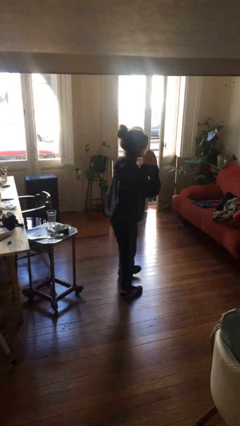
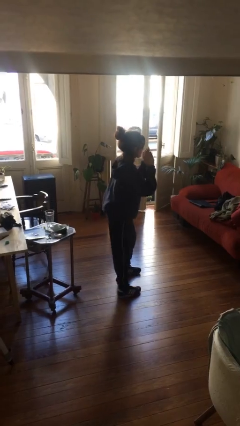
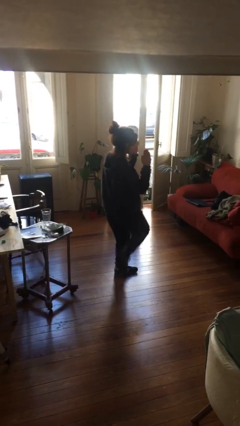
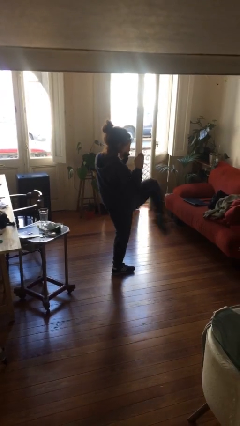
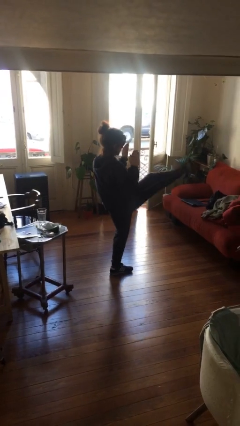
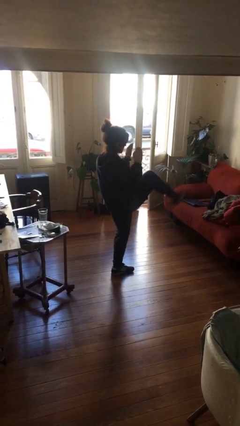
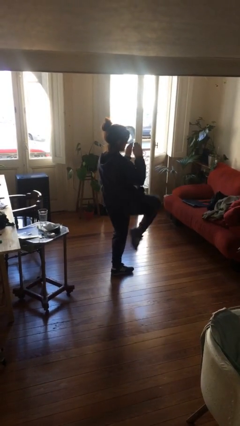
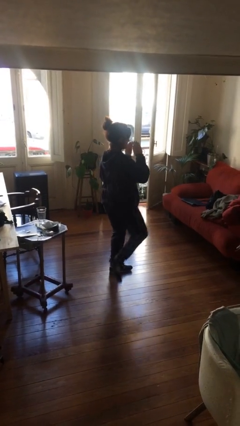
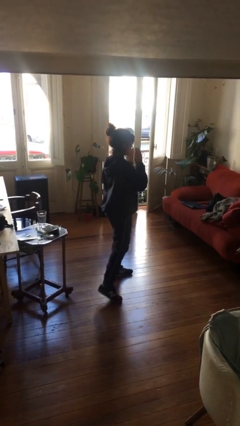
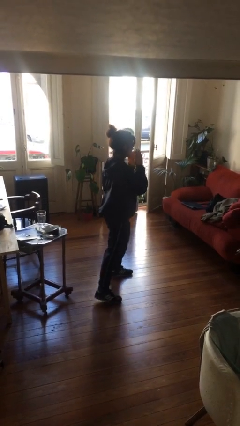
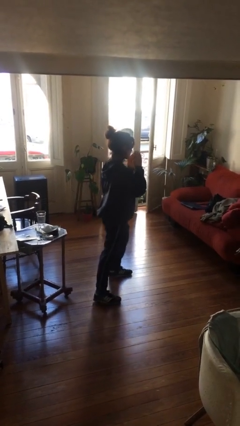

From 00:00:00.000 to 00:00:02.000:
person karate kicks

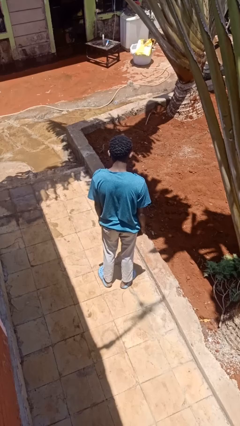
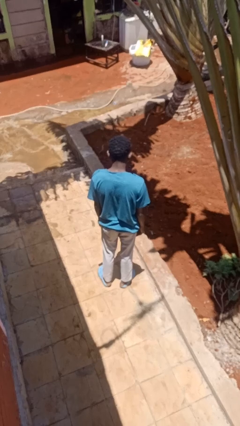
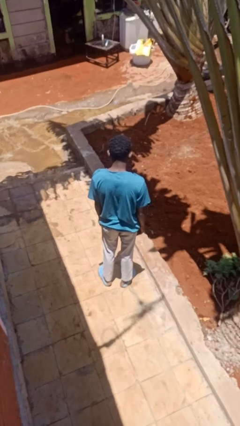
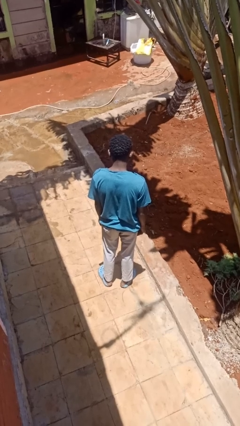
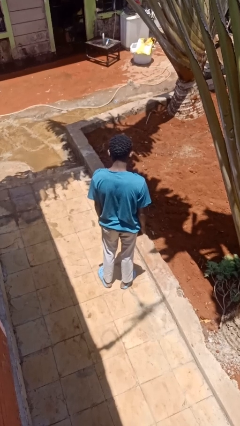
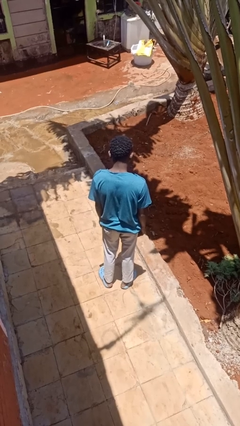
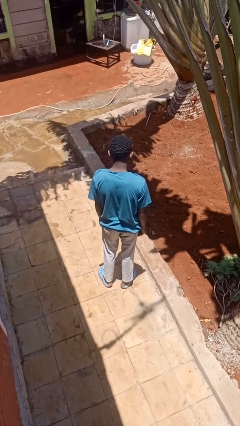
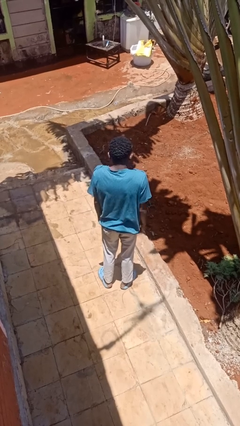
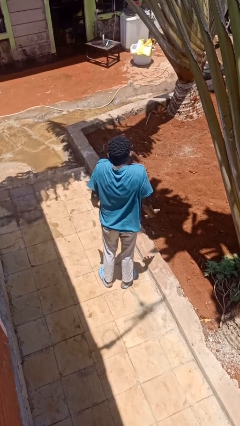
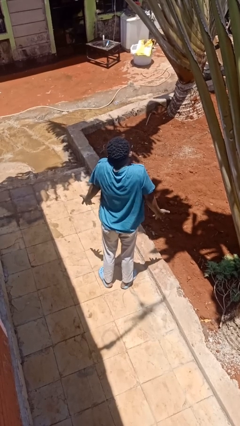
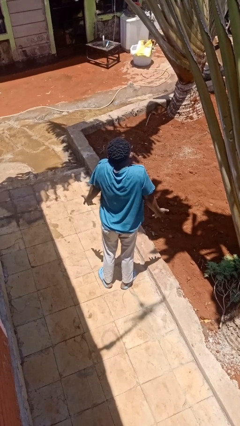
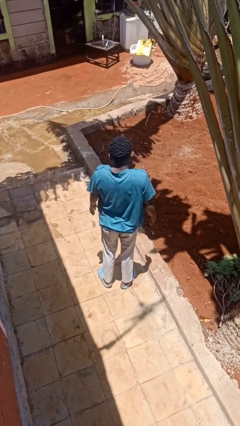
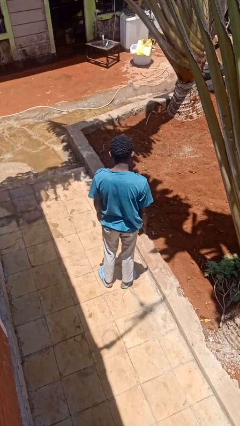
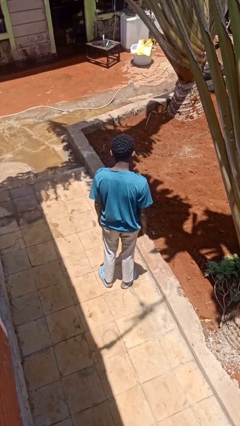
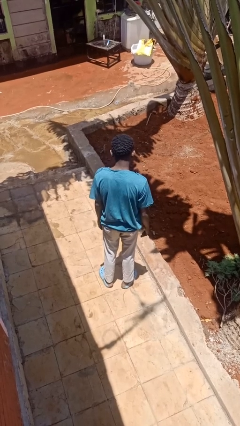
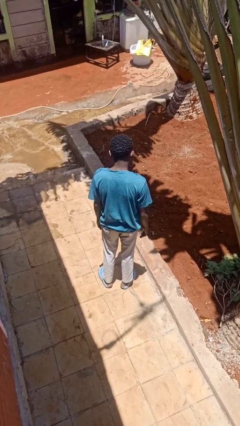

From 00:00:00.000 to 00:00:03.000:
person shrugs

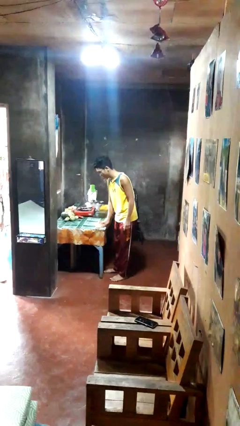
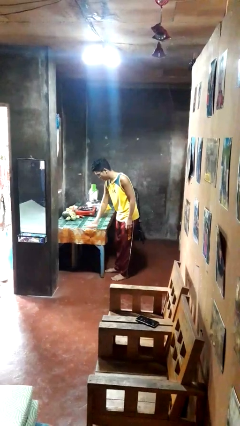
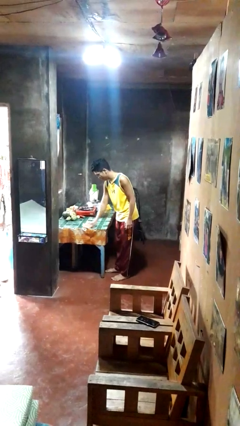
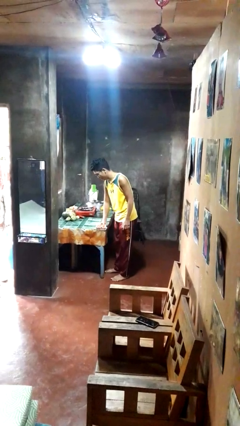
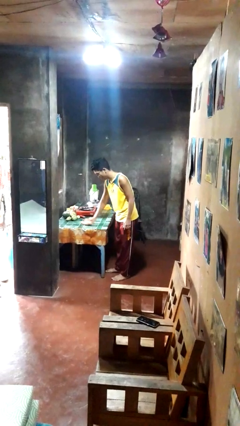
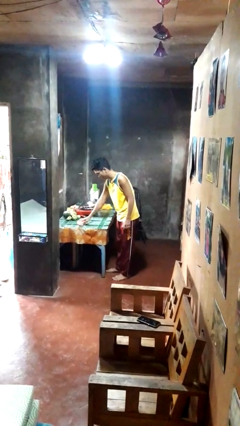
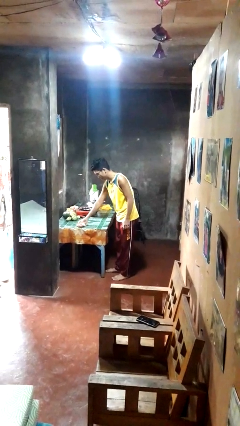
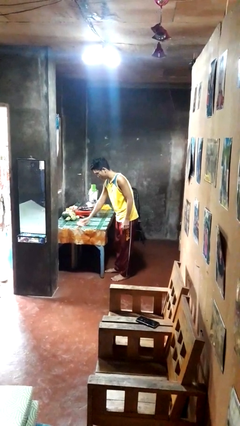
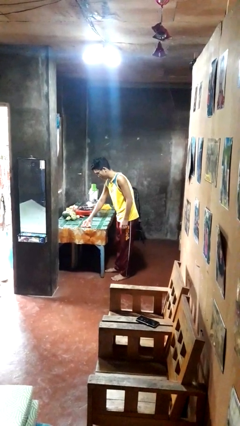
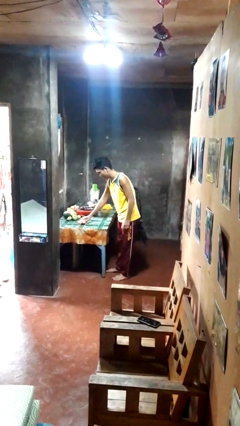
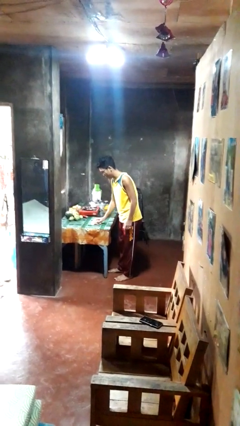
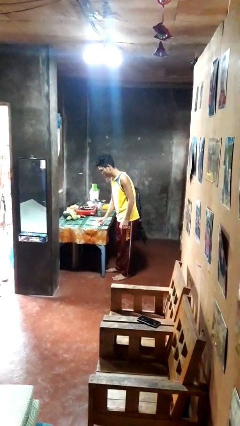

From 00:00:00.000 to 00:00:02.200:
person cleans table with rag

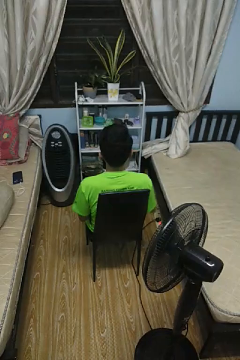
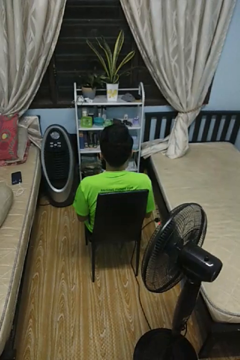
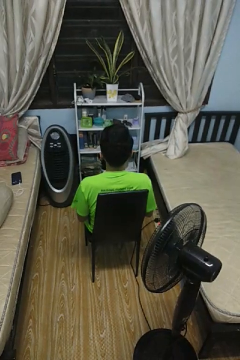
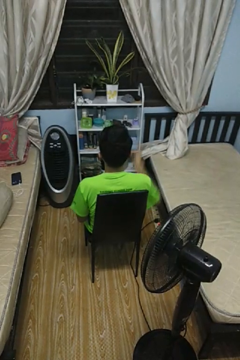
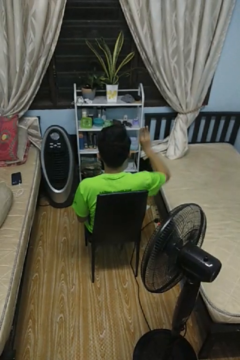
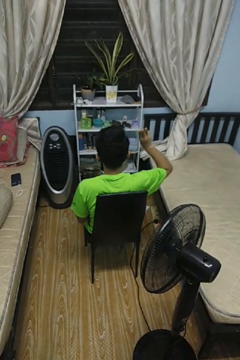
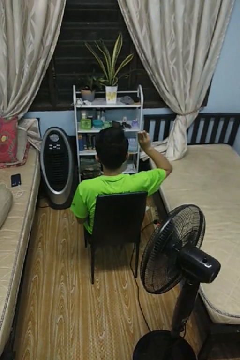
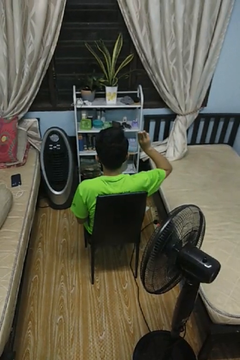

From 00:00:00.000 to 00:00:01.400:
person gestures number three

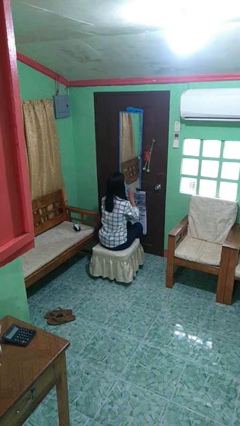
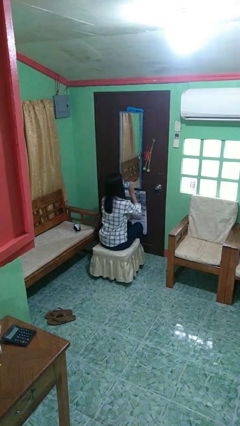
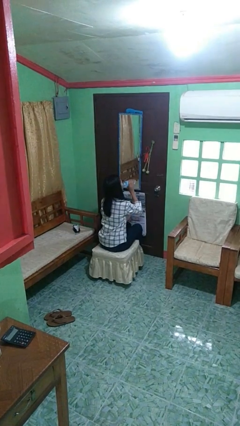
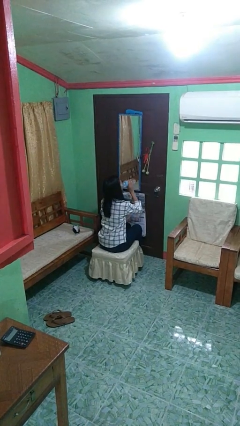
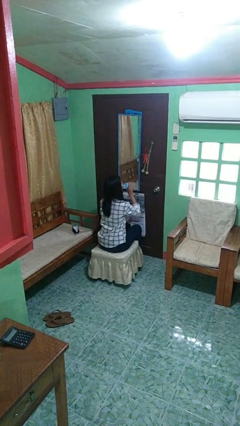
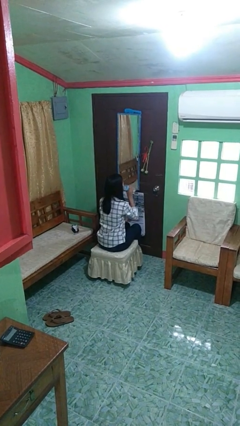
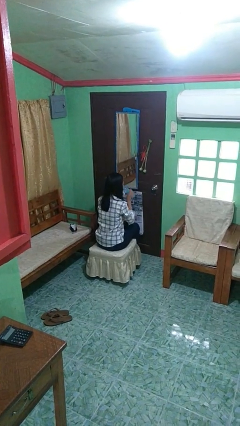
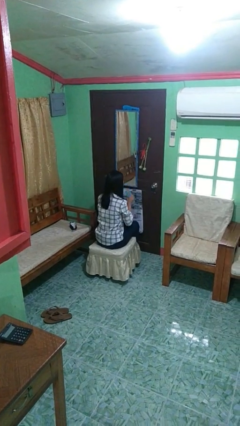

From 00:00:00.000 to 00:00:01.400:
person drinks from bottle

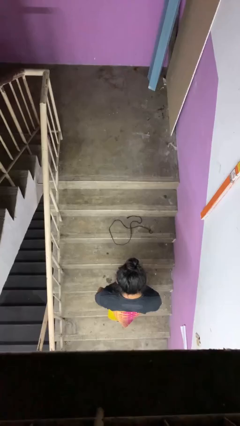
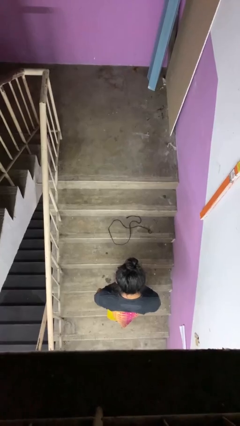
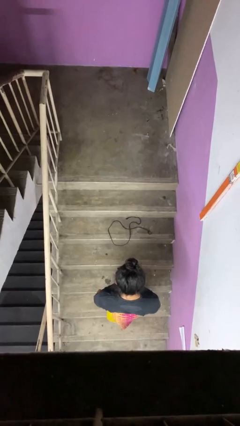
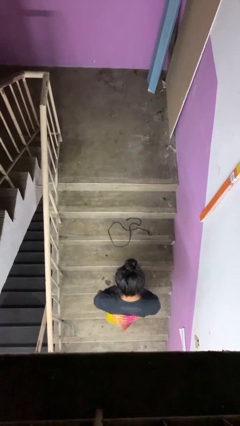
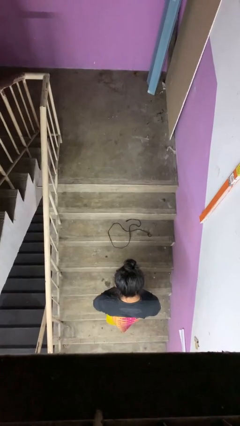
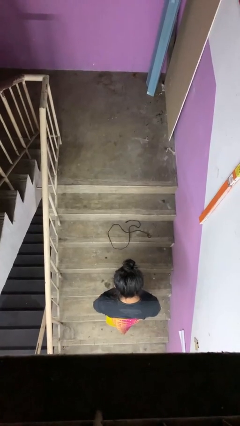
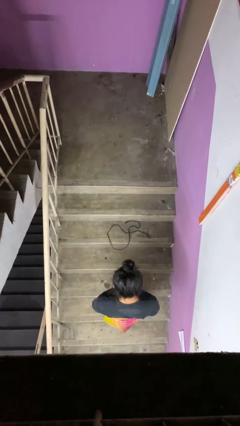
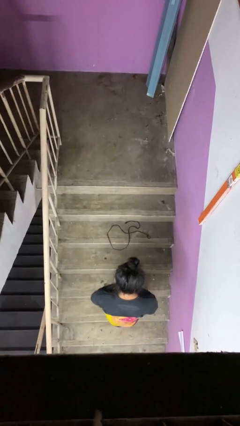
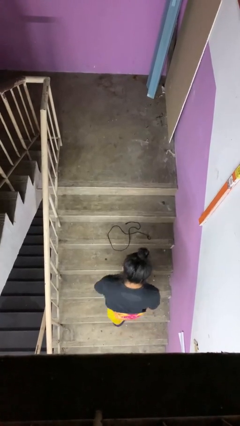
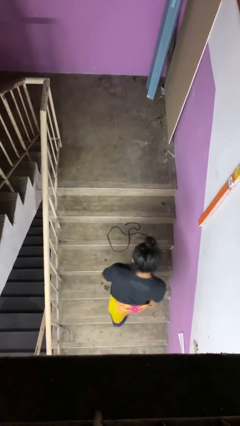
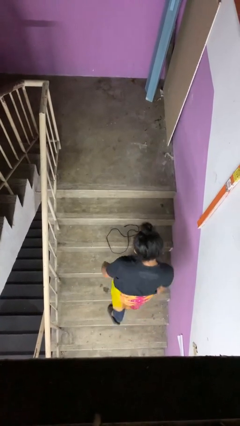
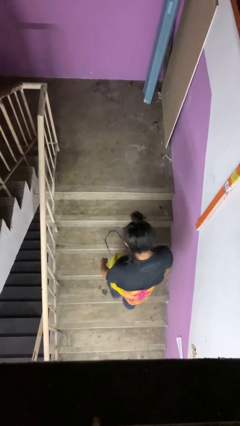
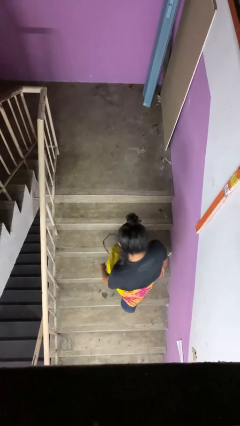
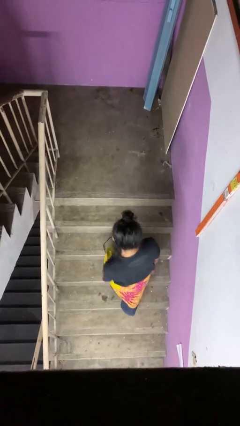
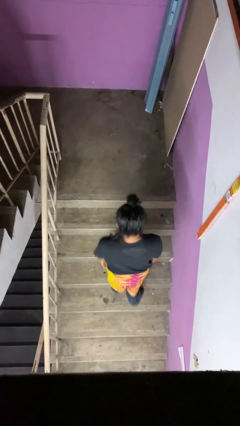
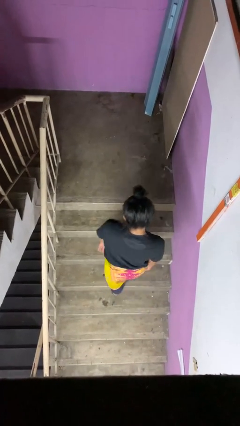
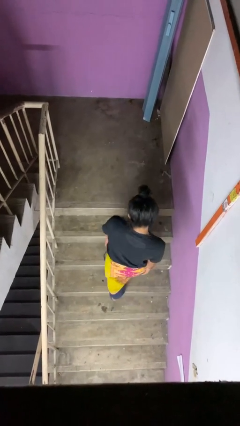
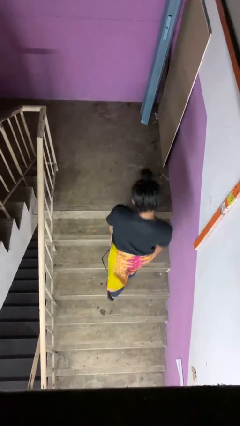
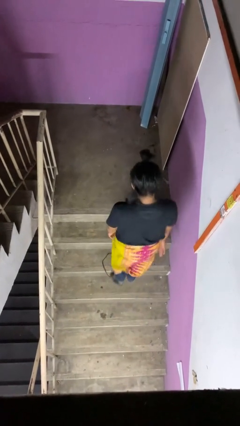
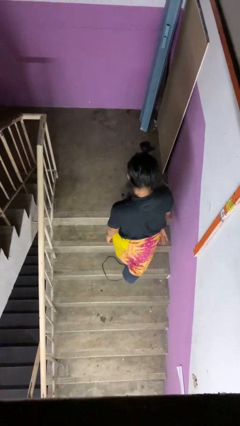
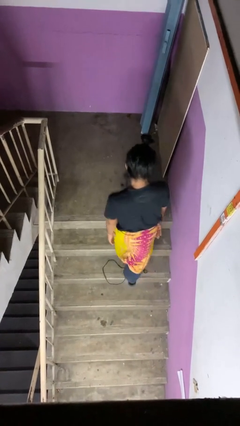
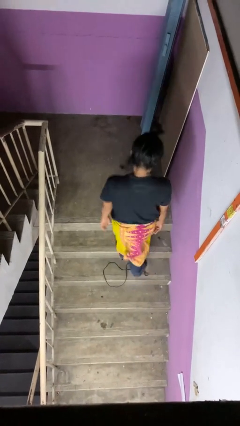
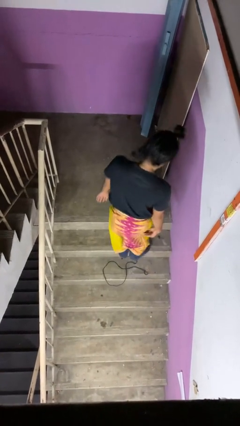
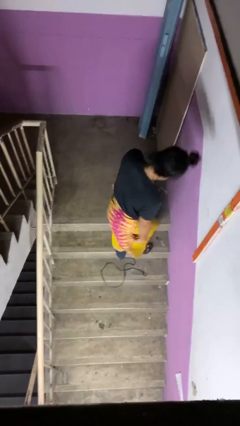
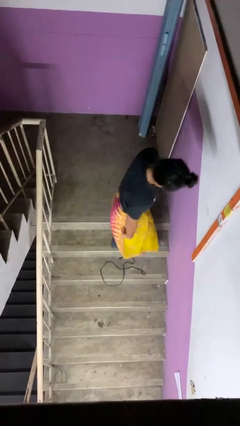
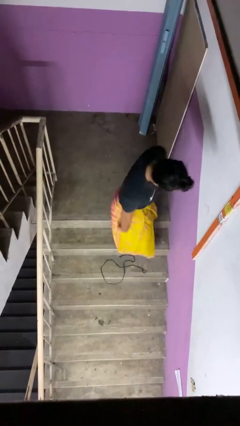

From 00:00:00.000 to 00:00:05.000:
person climbs up stairs

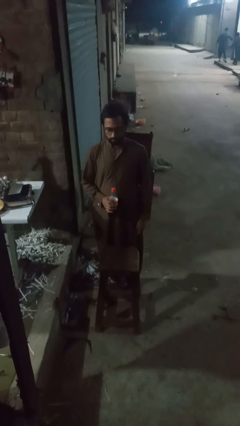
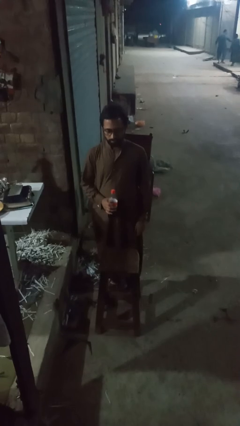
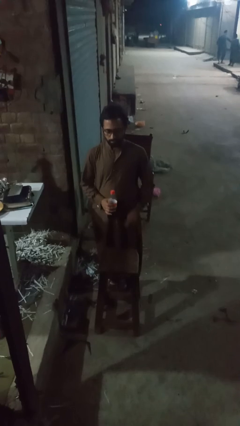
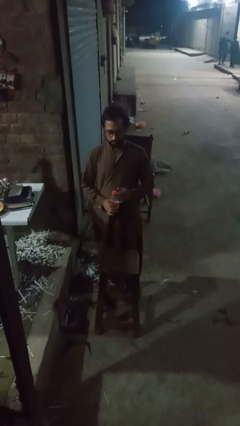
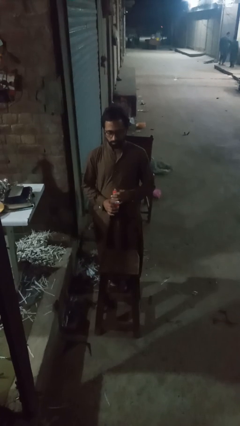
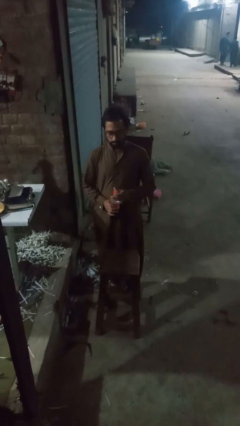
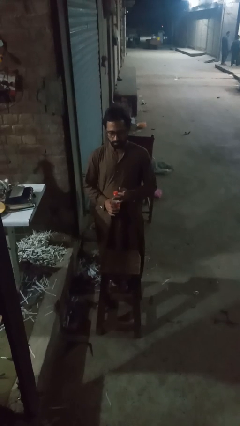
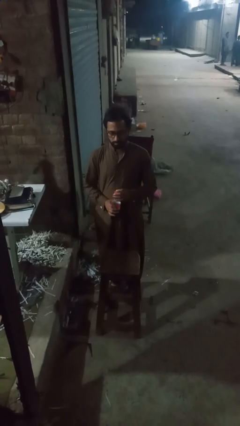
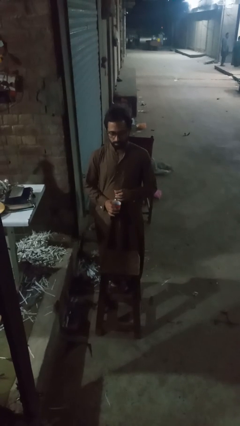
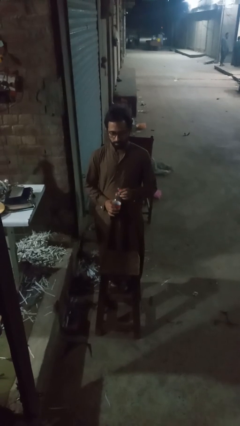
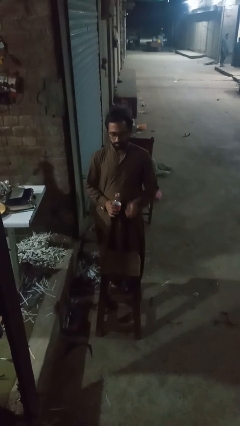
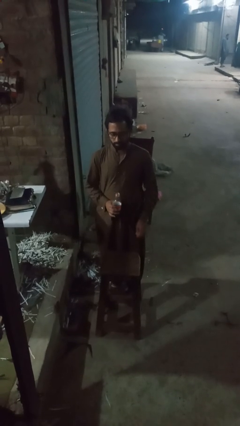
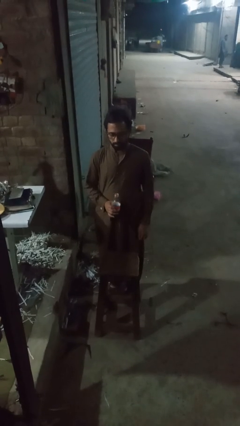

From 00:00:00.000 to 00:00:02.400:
person unscrews lid from bottle

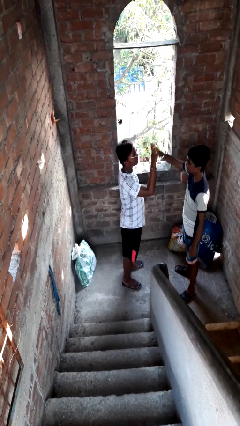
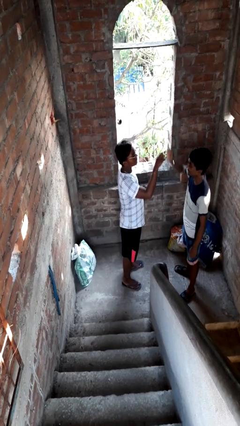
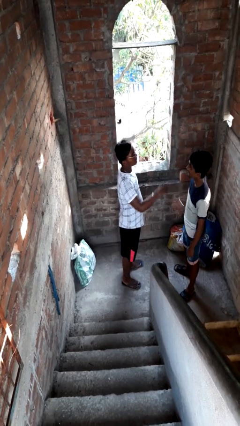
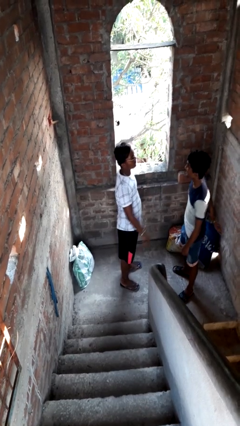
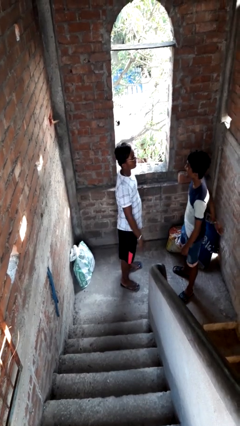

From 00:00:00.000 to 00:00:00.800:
person highfives hand
